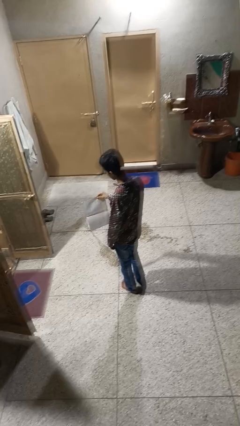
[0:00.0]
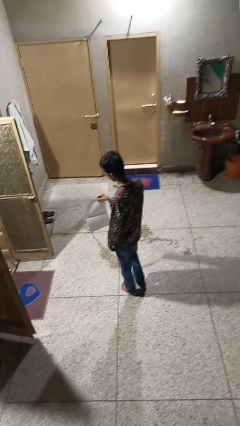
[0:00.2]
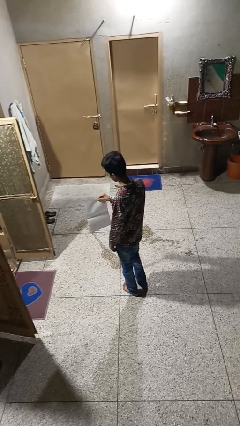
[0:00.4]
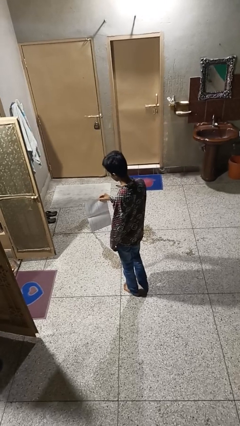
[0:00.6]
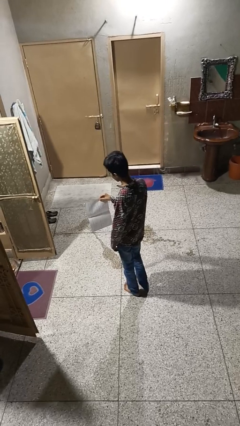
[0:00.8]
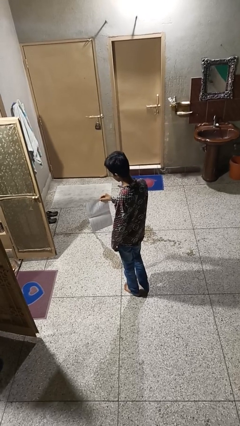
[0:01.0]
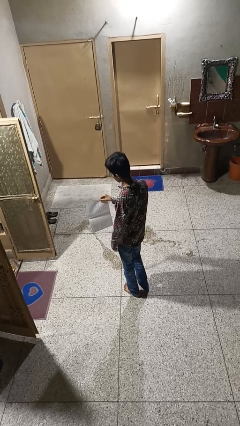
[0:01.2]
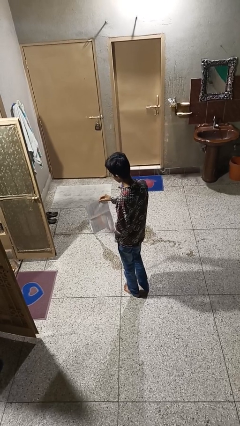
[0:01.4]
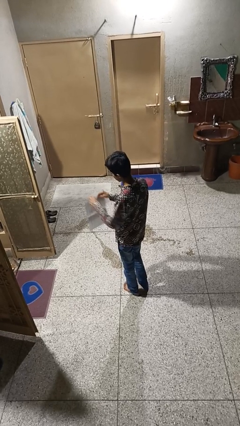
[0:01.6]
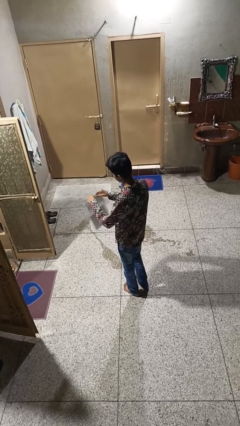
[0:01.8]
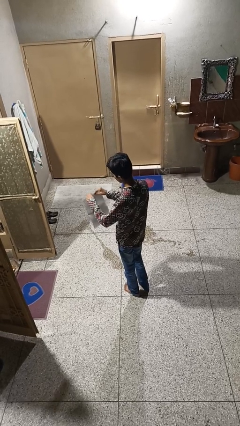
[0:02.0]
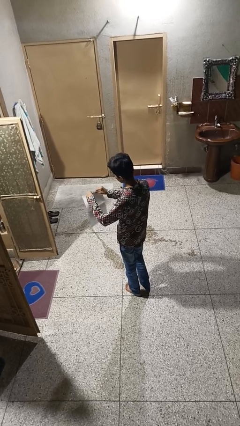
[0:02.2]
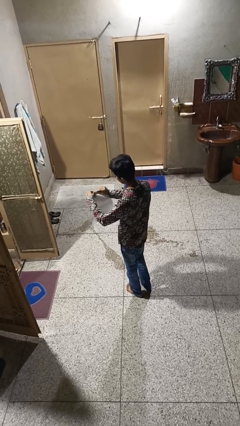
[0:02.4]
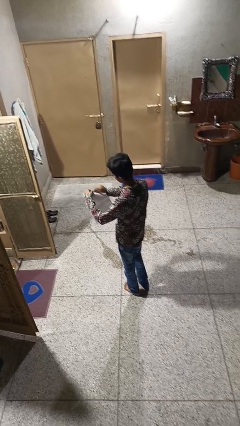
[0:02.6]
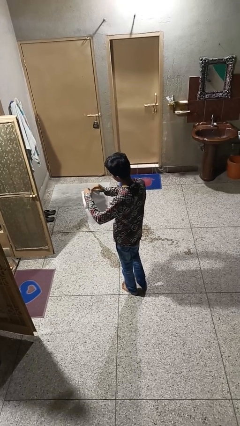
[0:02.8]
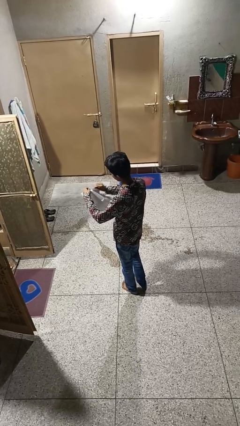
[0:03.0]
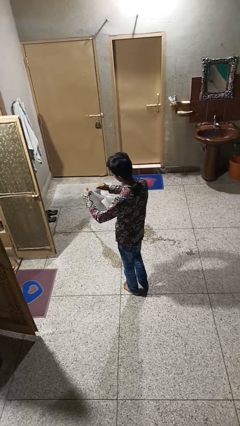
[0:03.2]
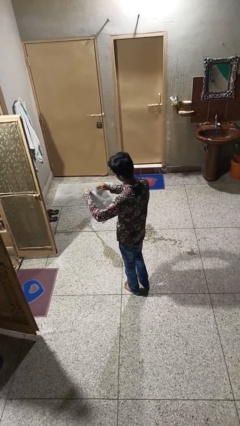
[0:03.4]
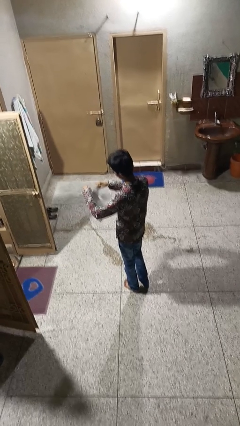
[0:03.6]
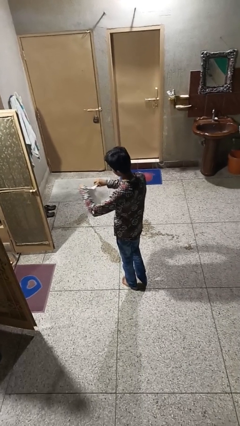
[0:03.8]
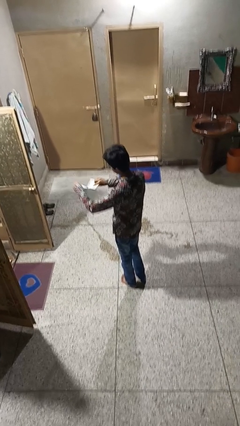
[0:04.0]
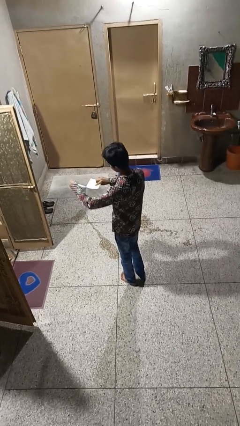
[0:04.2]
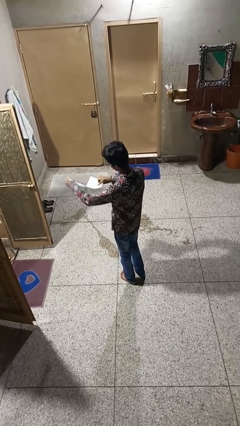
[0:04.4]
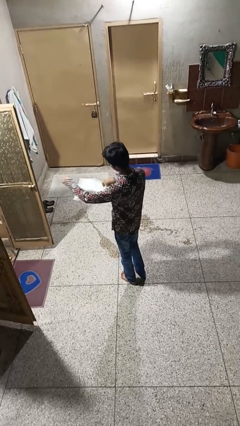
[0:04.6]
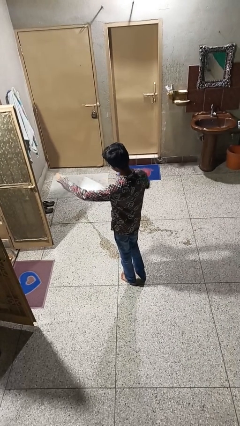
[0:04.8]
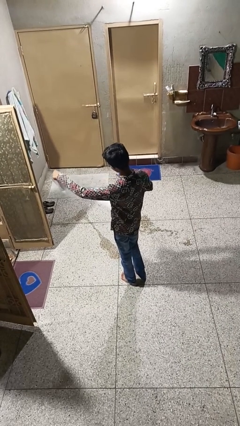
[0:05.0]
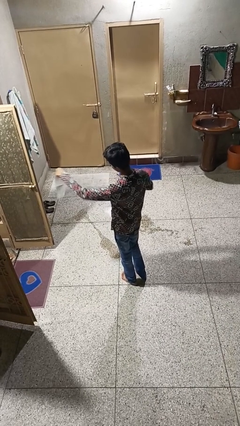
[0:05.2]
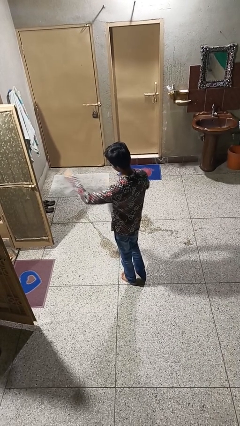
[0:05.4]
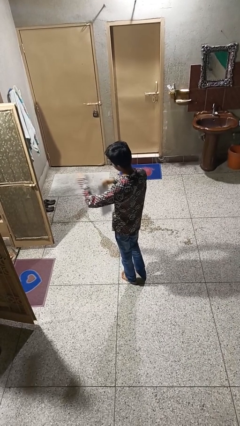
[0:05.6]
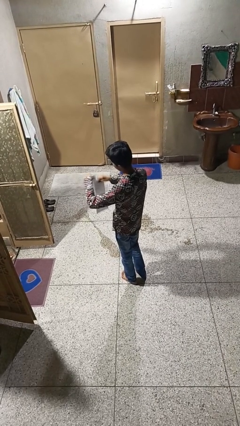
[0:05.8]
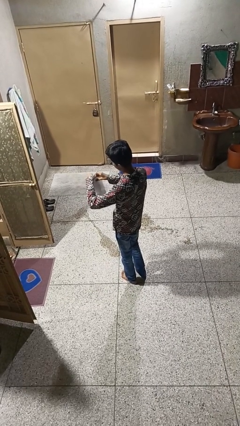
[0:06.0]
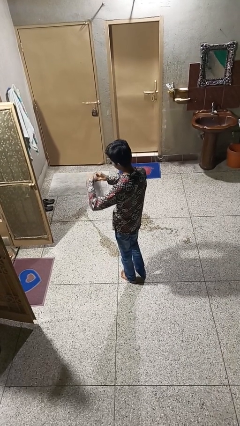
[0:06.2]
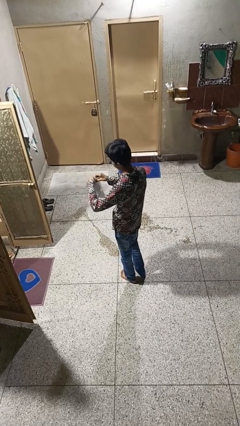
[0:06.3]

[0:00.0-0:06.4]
person tears paper

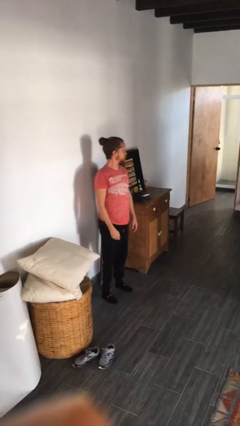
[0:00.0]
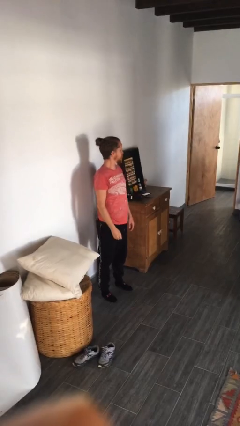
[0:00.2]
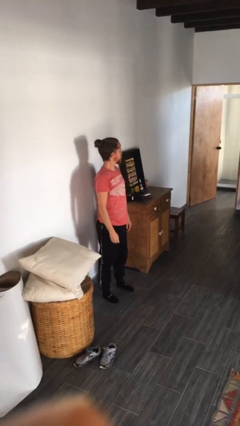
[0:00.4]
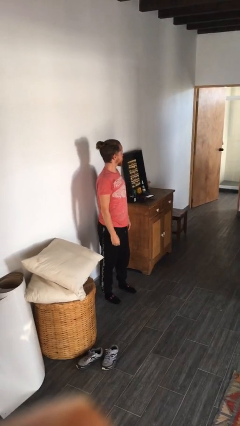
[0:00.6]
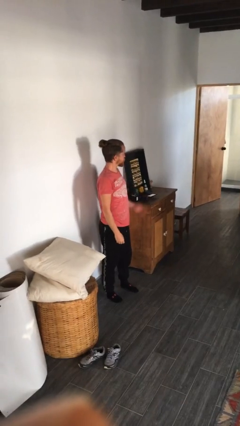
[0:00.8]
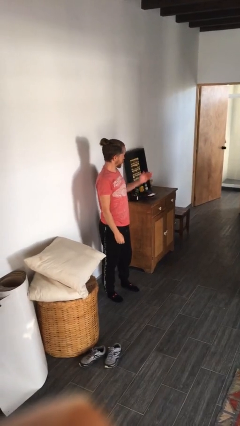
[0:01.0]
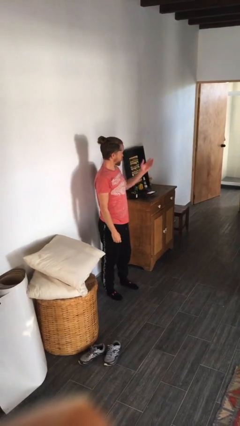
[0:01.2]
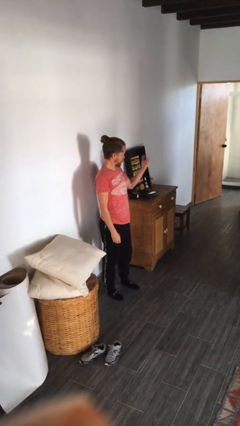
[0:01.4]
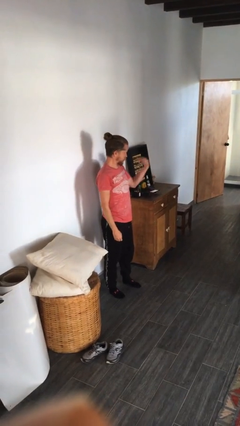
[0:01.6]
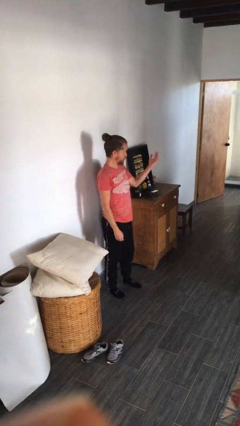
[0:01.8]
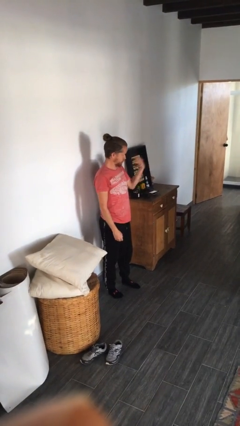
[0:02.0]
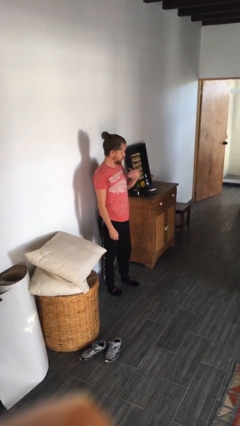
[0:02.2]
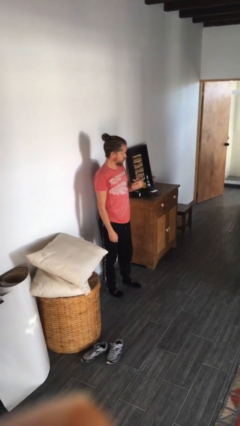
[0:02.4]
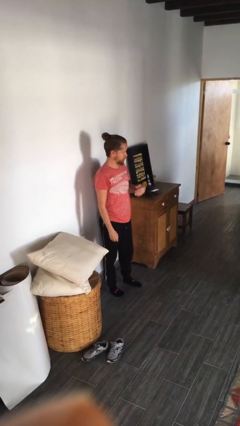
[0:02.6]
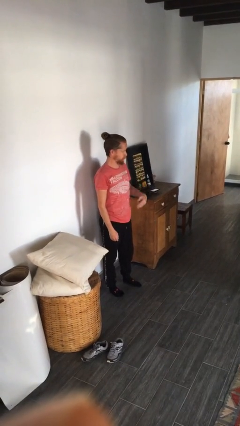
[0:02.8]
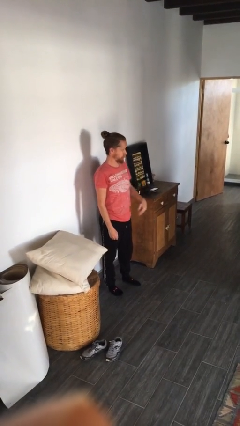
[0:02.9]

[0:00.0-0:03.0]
person gestures come here

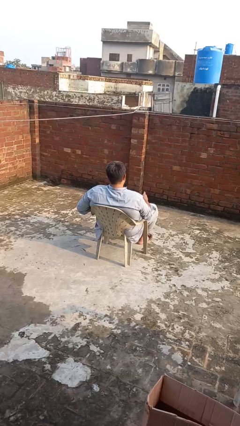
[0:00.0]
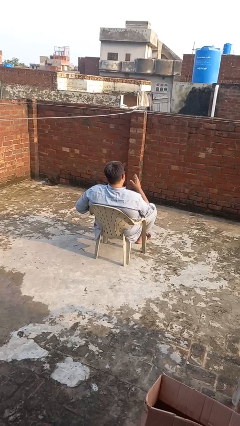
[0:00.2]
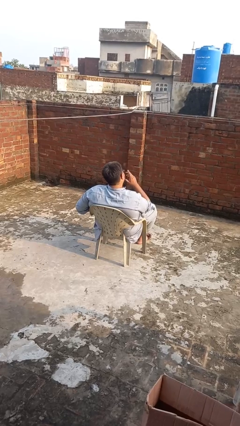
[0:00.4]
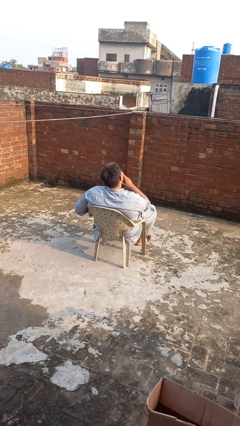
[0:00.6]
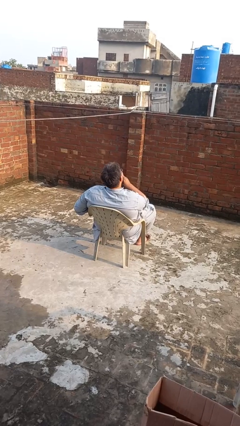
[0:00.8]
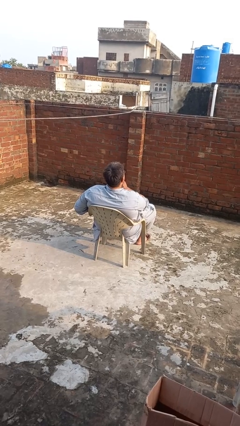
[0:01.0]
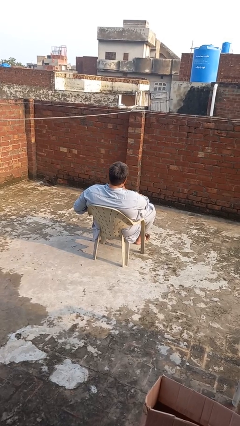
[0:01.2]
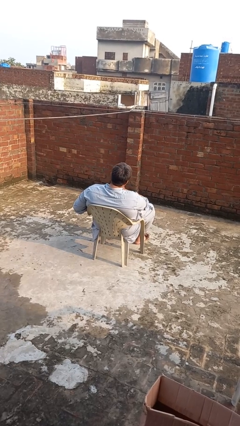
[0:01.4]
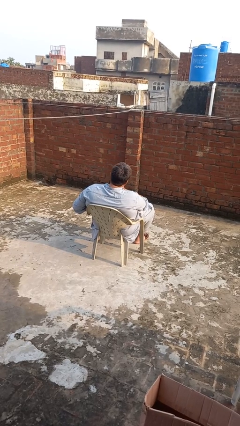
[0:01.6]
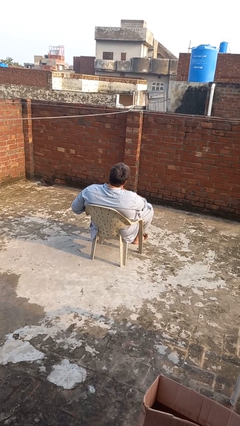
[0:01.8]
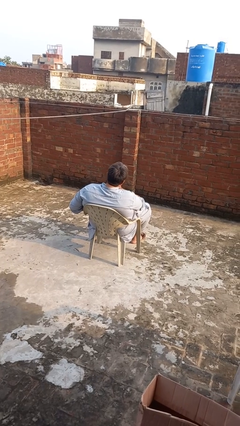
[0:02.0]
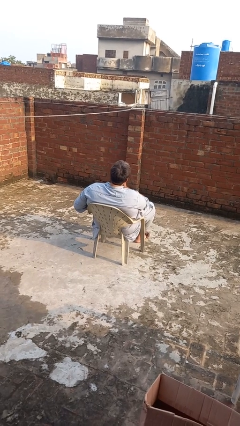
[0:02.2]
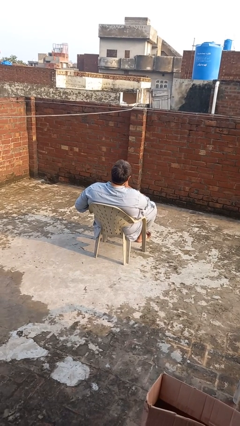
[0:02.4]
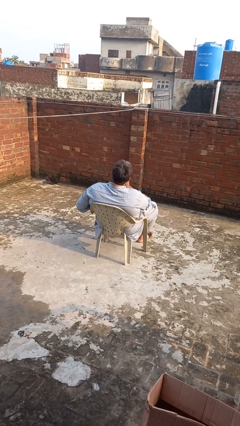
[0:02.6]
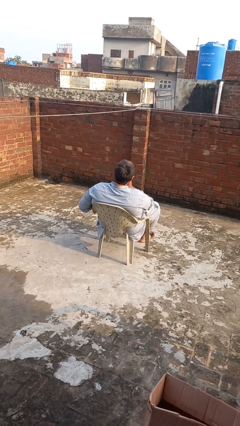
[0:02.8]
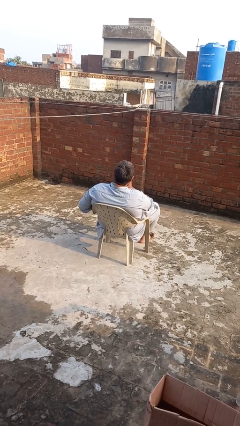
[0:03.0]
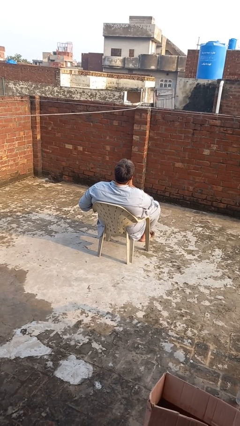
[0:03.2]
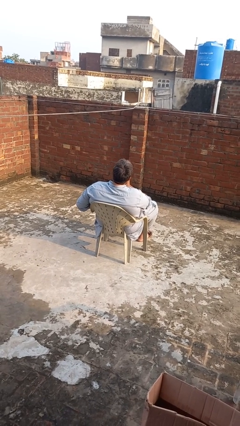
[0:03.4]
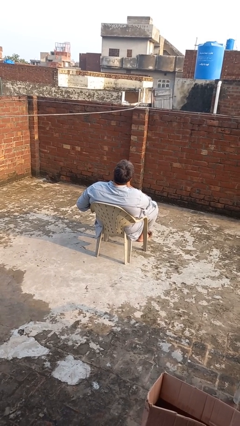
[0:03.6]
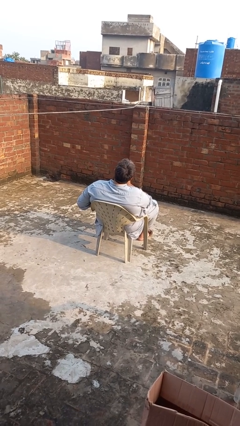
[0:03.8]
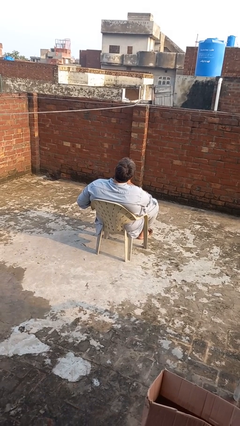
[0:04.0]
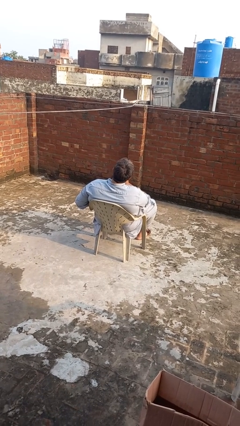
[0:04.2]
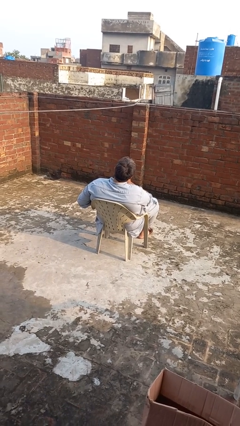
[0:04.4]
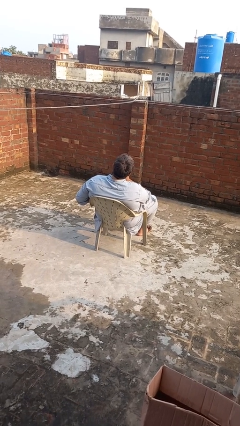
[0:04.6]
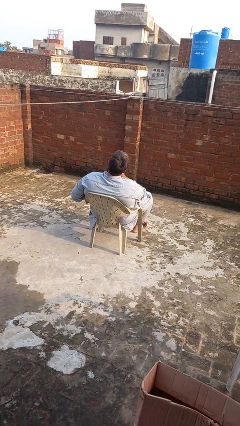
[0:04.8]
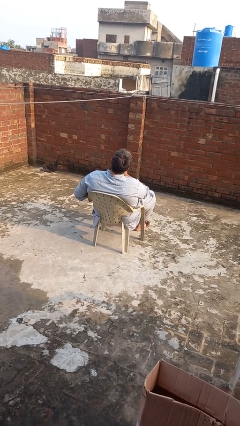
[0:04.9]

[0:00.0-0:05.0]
person strokes chin

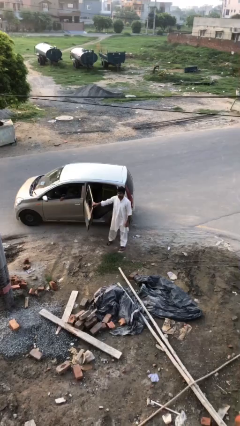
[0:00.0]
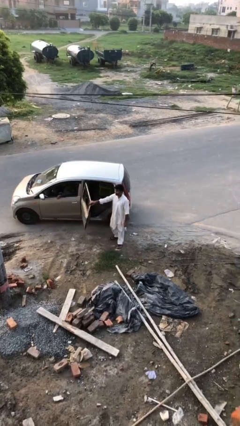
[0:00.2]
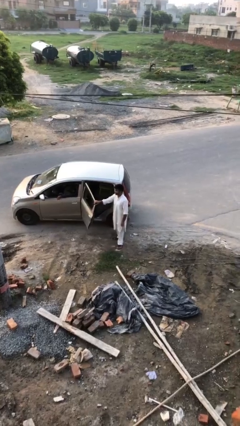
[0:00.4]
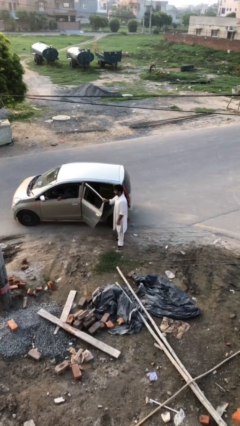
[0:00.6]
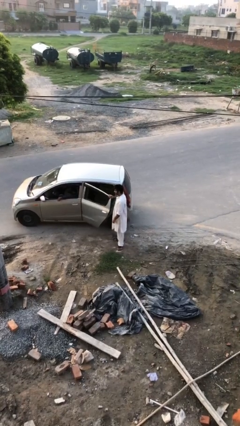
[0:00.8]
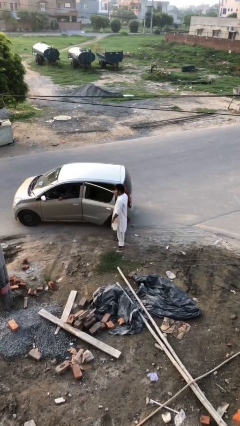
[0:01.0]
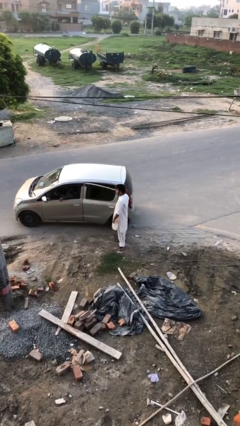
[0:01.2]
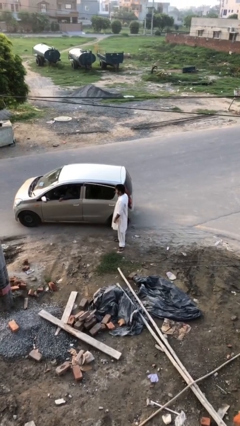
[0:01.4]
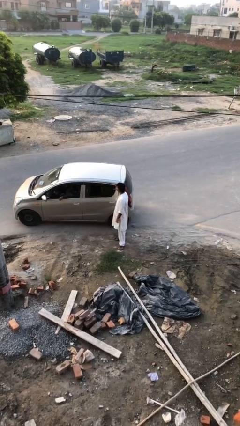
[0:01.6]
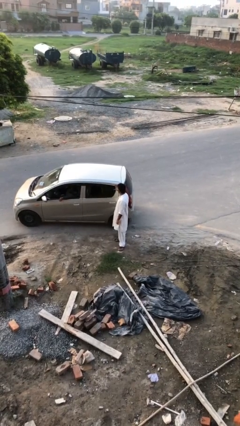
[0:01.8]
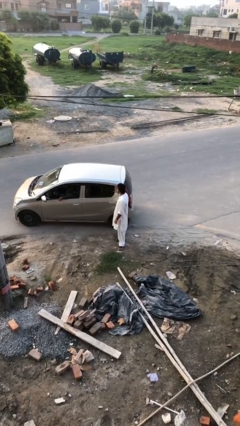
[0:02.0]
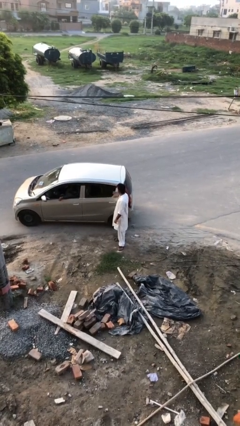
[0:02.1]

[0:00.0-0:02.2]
person closes car door

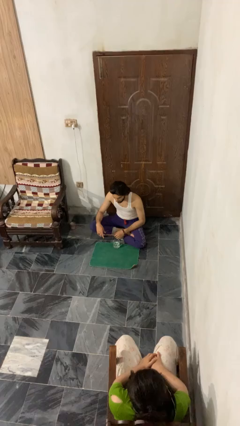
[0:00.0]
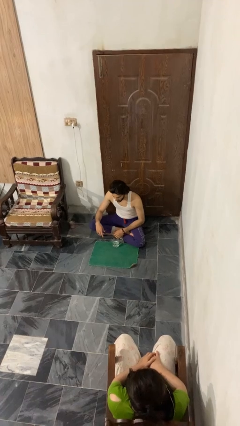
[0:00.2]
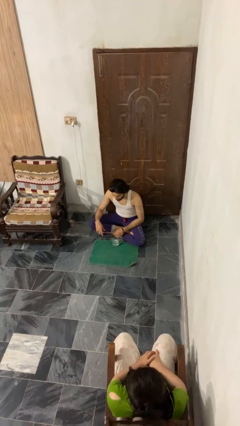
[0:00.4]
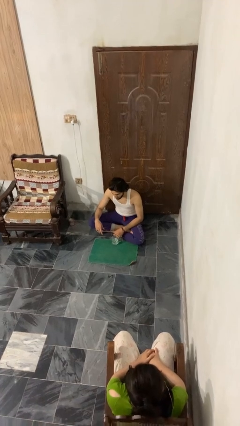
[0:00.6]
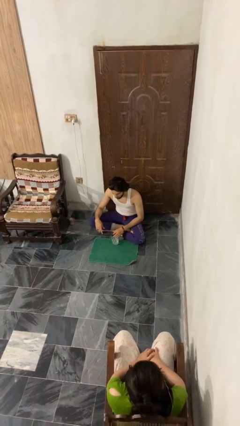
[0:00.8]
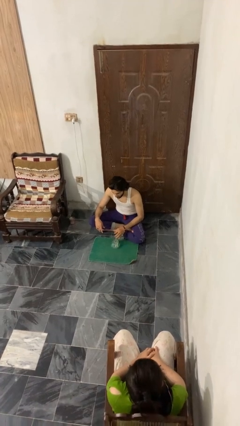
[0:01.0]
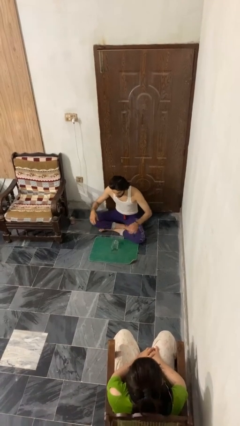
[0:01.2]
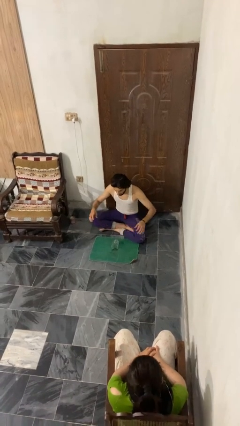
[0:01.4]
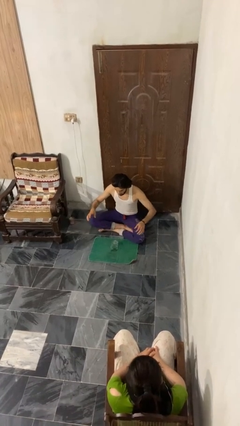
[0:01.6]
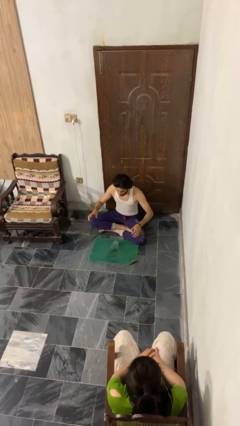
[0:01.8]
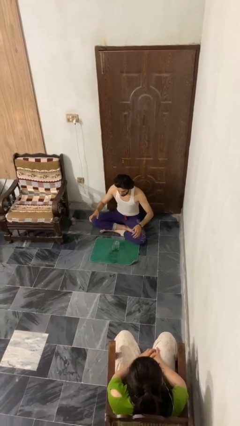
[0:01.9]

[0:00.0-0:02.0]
person spills on floor
